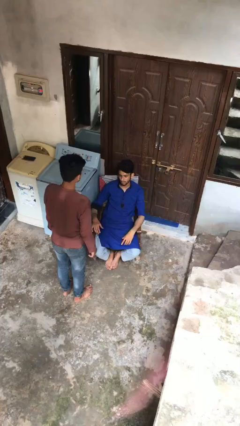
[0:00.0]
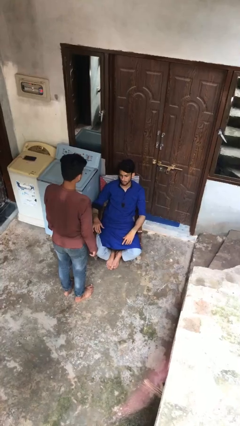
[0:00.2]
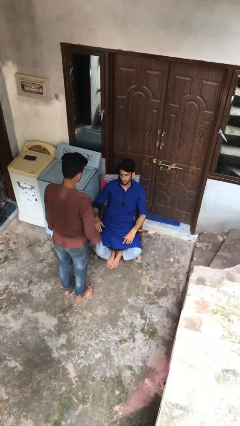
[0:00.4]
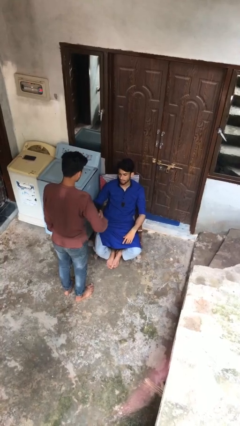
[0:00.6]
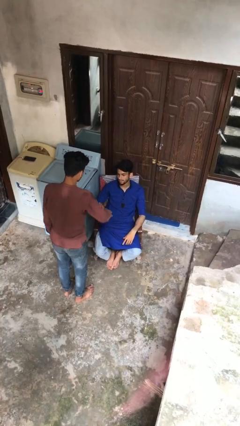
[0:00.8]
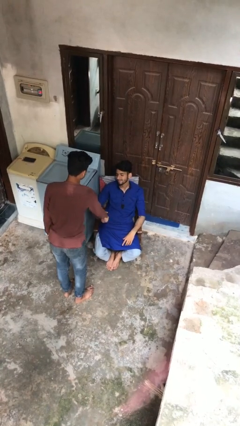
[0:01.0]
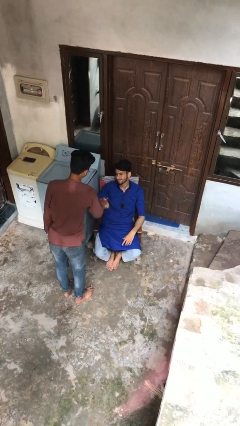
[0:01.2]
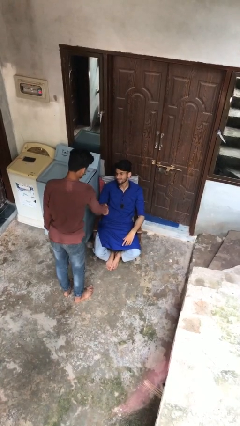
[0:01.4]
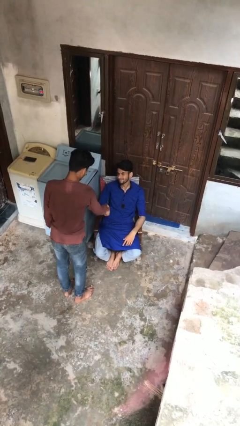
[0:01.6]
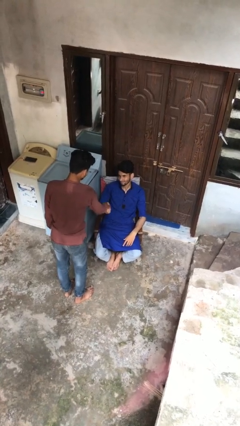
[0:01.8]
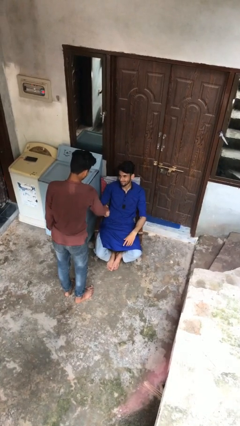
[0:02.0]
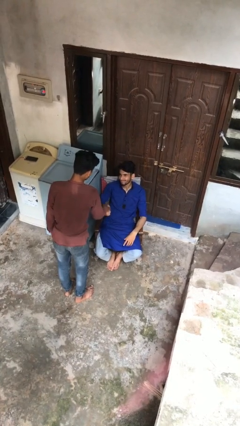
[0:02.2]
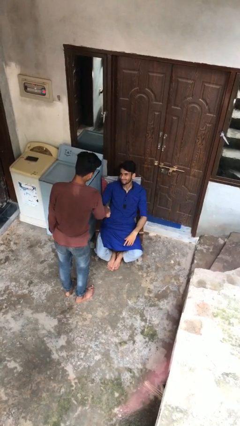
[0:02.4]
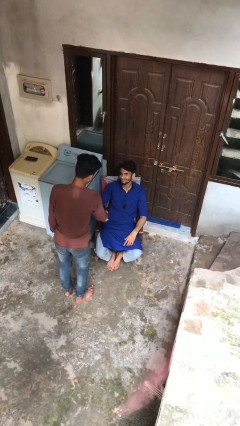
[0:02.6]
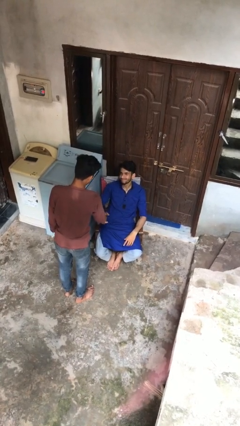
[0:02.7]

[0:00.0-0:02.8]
person shakes hand

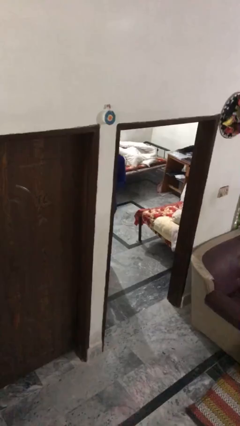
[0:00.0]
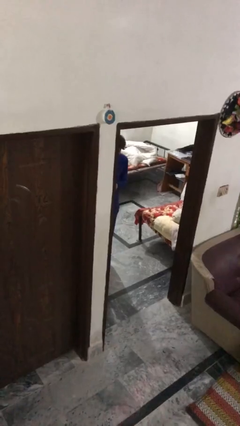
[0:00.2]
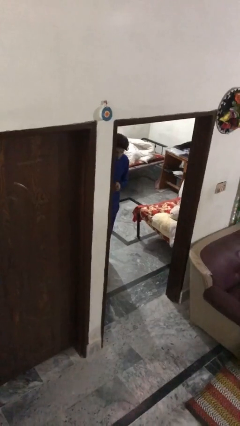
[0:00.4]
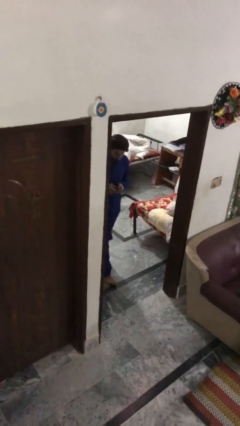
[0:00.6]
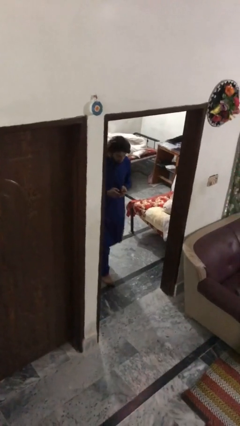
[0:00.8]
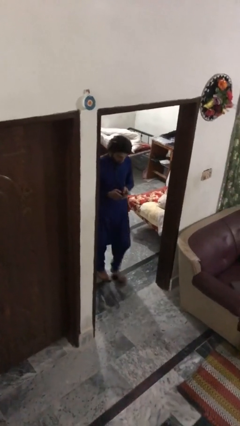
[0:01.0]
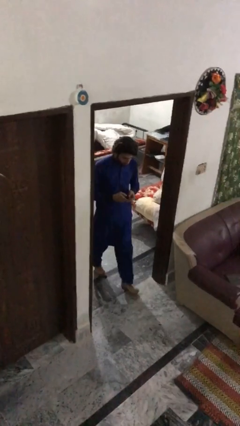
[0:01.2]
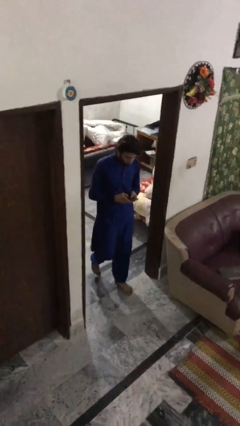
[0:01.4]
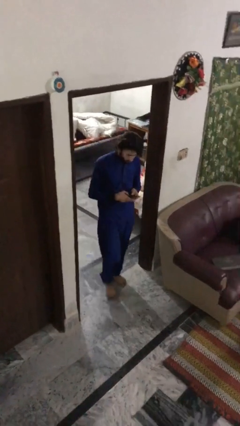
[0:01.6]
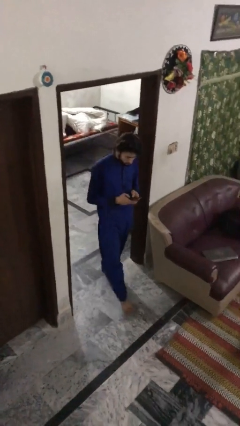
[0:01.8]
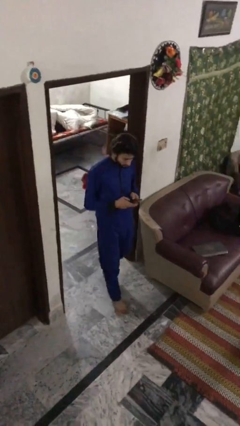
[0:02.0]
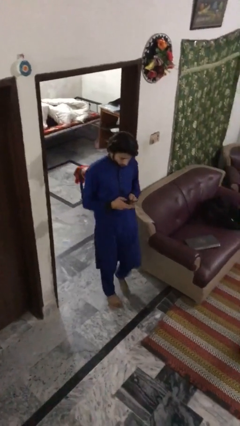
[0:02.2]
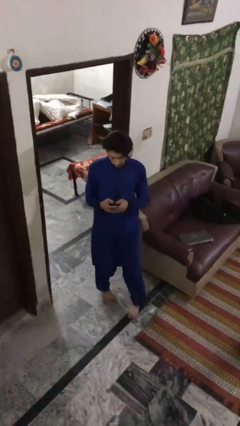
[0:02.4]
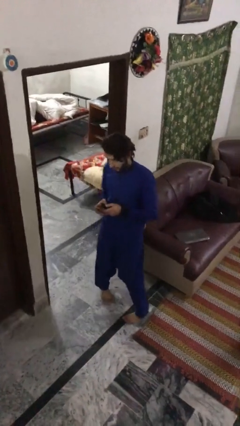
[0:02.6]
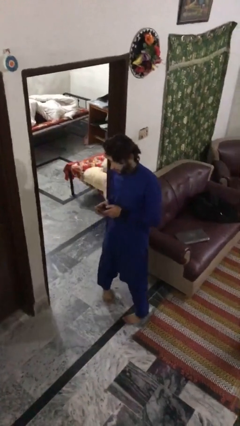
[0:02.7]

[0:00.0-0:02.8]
person enters scene through structure

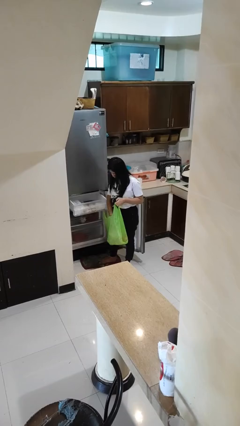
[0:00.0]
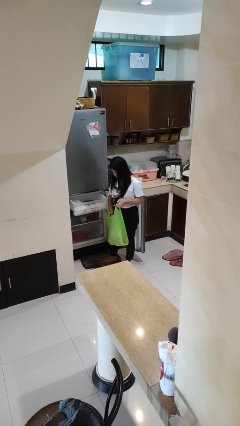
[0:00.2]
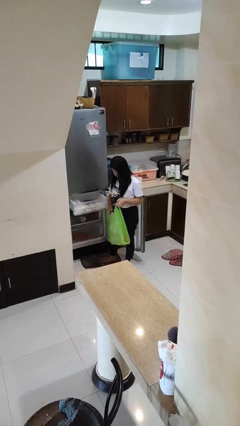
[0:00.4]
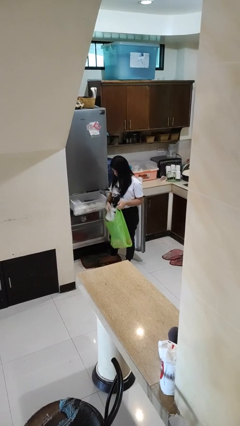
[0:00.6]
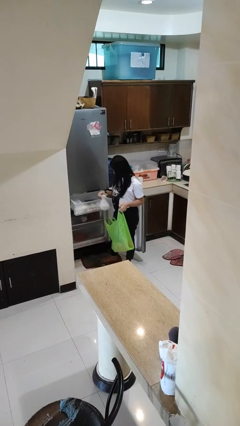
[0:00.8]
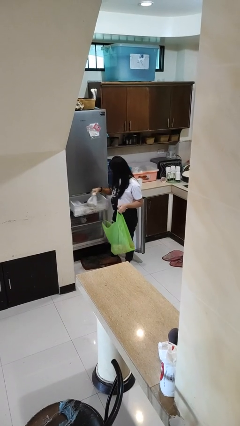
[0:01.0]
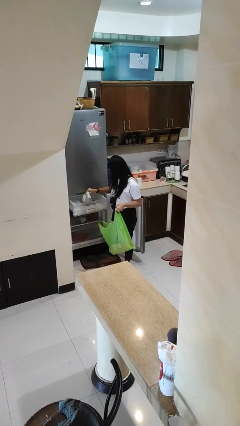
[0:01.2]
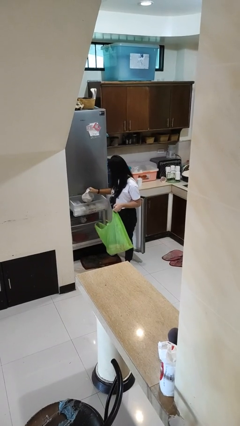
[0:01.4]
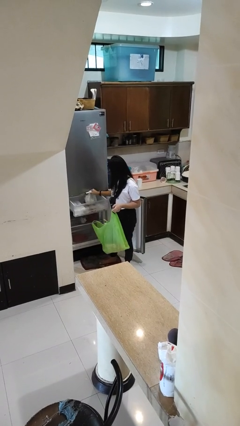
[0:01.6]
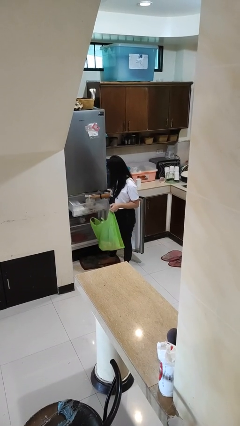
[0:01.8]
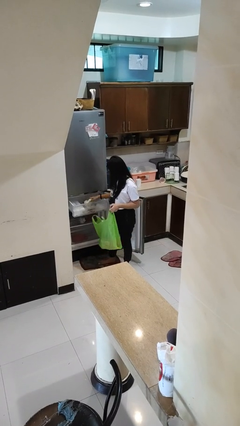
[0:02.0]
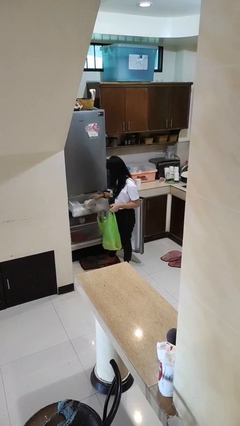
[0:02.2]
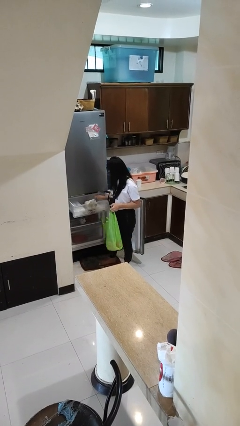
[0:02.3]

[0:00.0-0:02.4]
person loads groceries into refrigerator

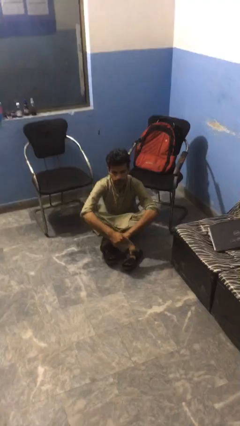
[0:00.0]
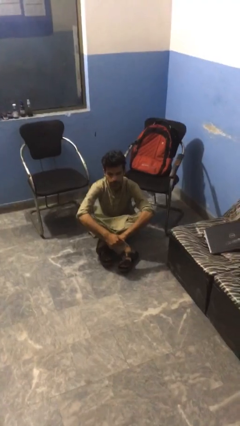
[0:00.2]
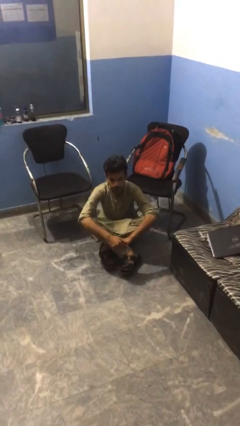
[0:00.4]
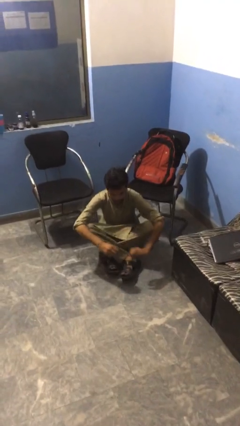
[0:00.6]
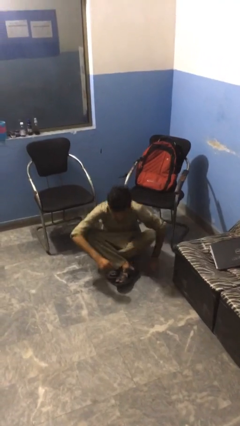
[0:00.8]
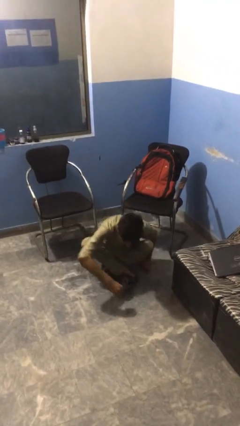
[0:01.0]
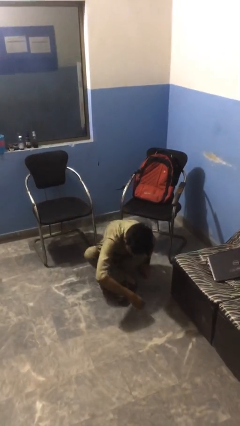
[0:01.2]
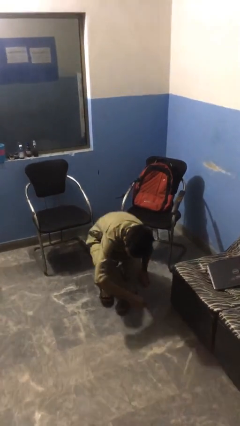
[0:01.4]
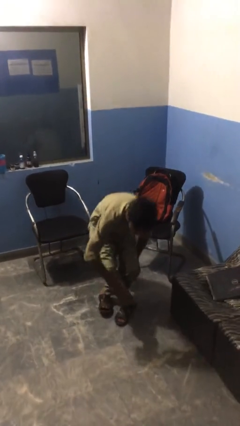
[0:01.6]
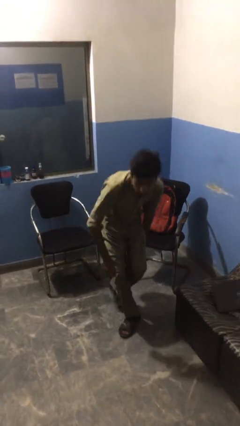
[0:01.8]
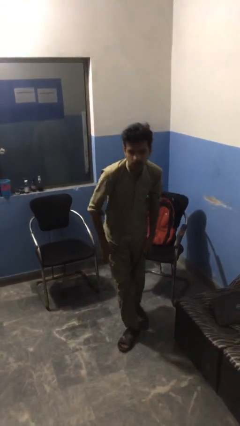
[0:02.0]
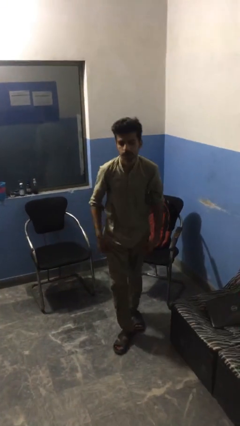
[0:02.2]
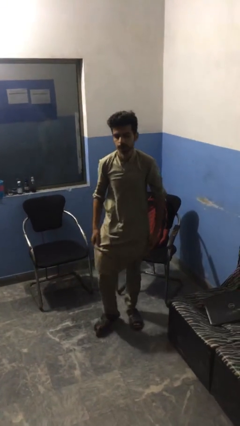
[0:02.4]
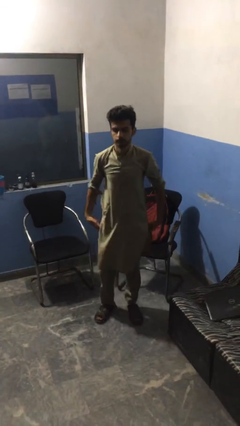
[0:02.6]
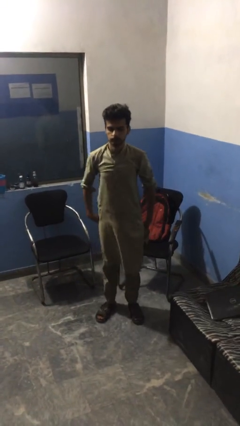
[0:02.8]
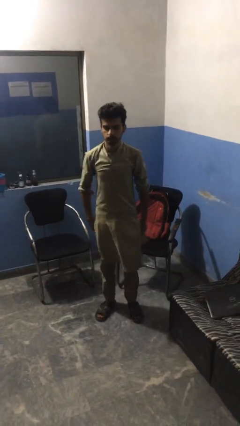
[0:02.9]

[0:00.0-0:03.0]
person stands up from floor

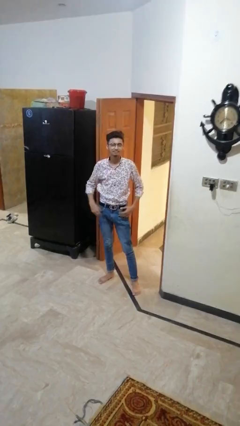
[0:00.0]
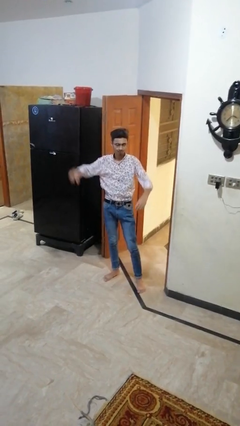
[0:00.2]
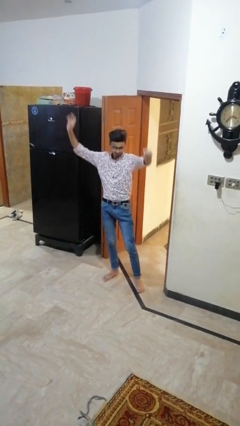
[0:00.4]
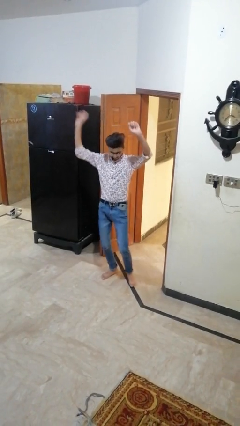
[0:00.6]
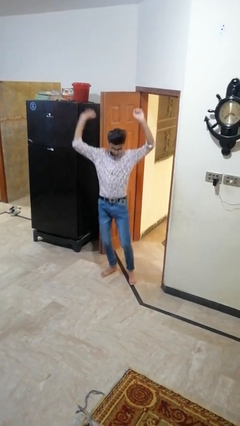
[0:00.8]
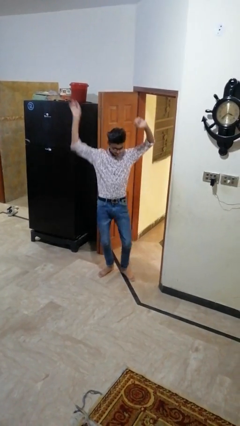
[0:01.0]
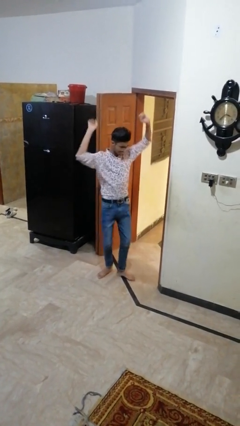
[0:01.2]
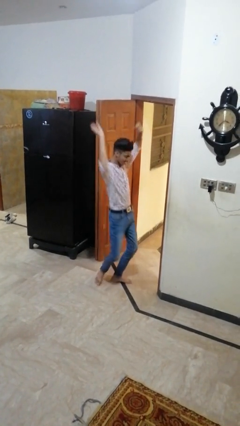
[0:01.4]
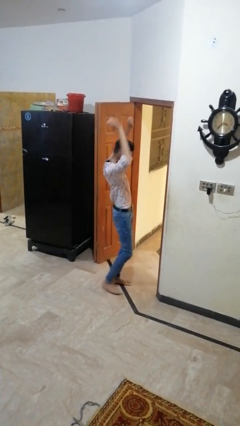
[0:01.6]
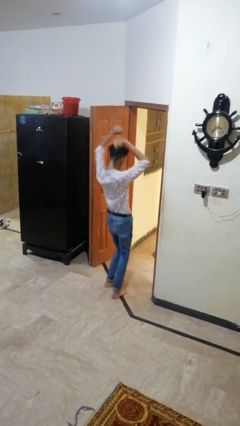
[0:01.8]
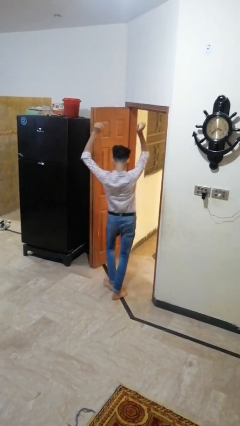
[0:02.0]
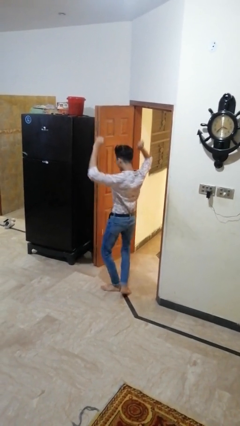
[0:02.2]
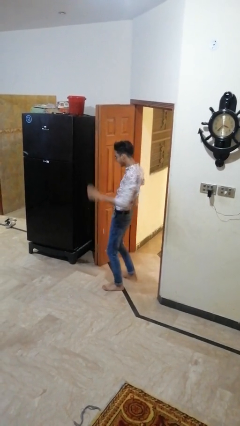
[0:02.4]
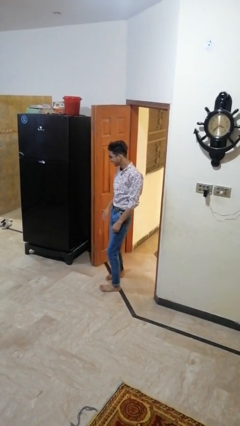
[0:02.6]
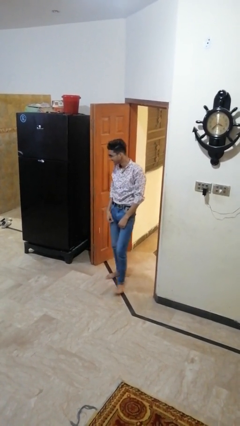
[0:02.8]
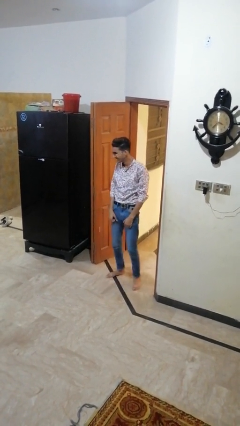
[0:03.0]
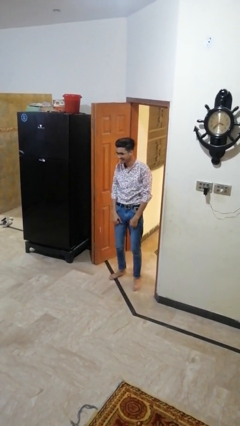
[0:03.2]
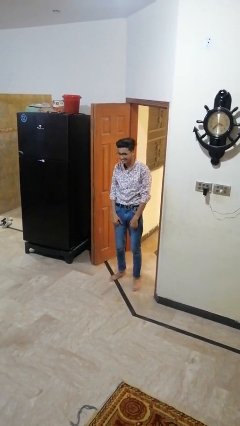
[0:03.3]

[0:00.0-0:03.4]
person dances in place

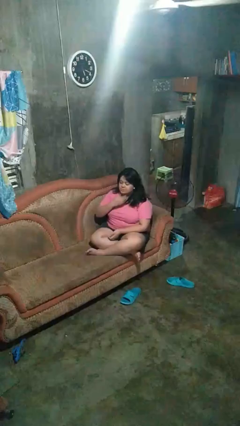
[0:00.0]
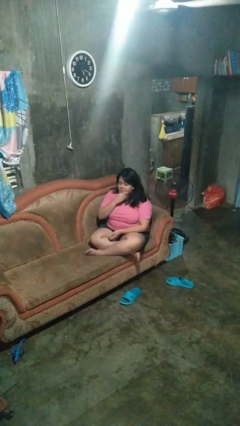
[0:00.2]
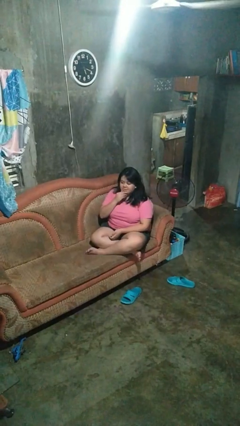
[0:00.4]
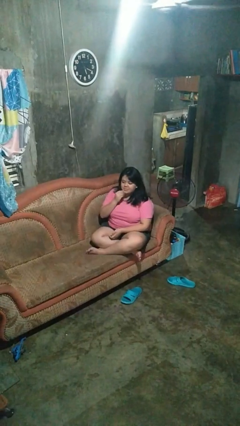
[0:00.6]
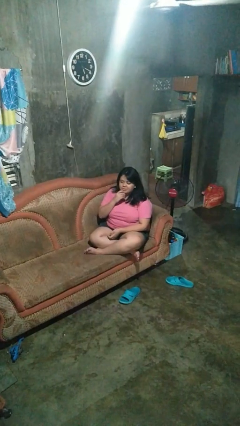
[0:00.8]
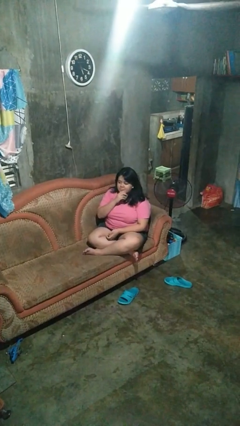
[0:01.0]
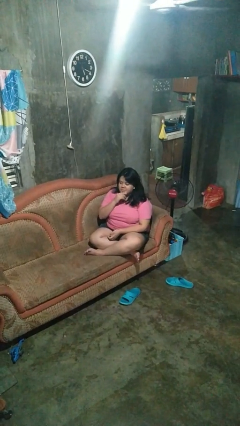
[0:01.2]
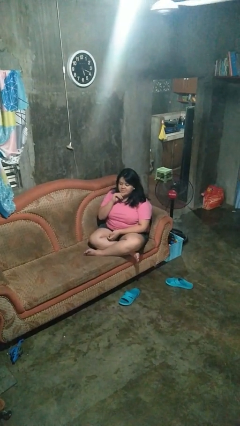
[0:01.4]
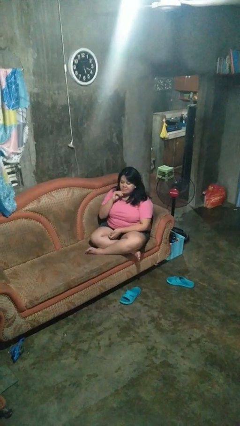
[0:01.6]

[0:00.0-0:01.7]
person strokes chin

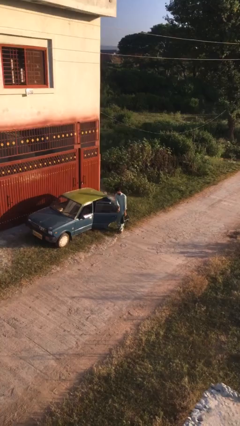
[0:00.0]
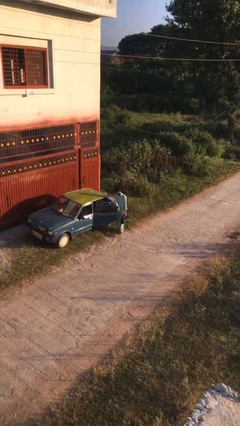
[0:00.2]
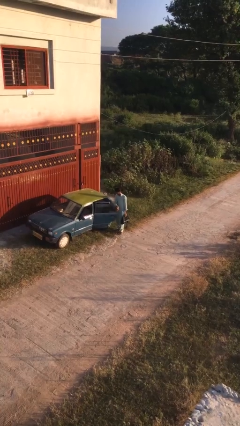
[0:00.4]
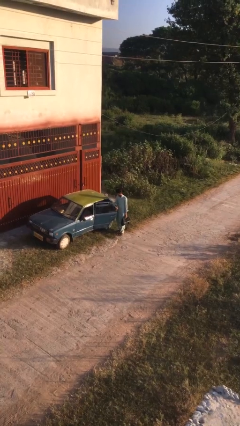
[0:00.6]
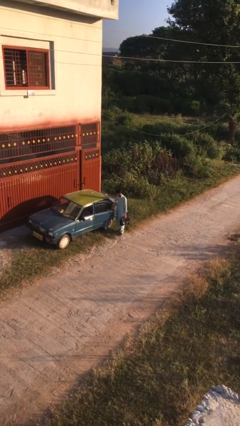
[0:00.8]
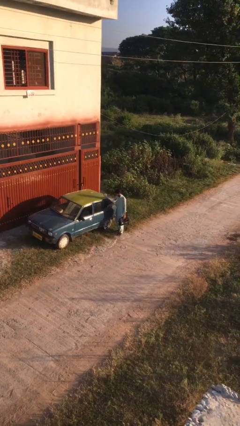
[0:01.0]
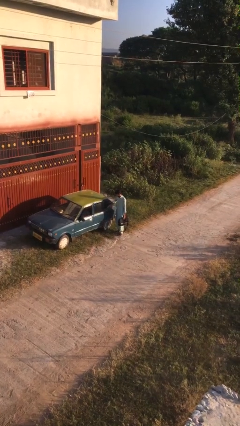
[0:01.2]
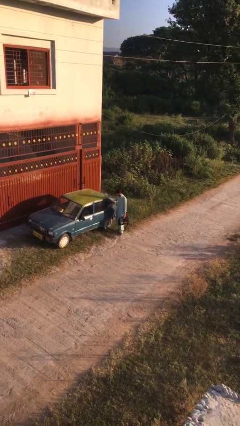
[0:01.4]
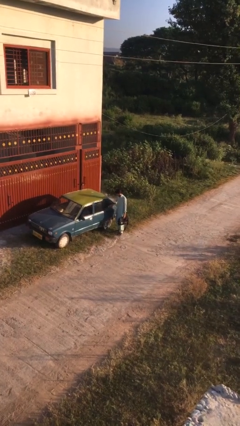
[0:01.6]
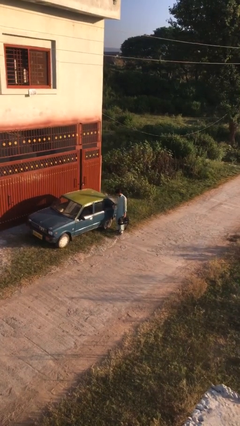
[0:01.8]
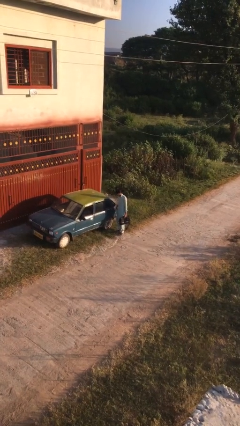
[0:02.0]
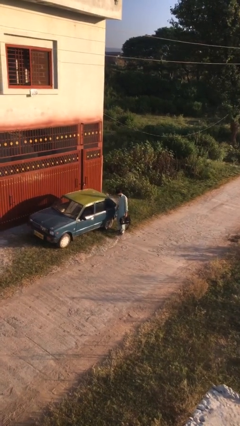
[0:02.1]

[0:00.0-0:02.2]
person closes car door
